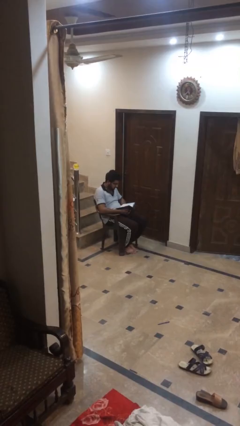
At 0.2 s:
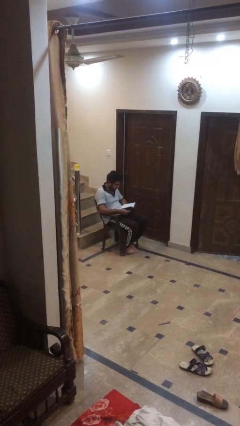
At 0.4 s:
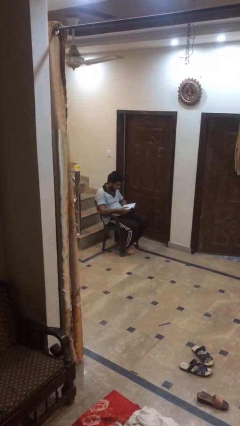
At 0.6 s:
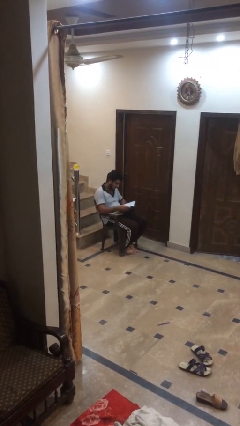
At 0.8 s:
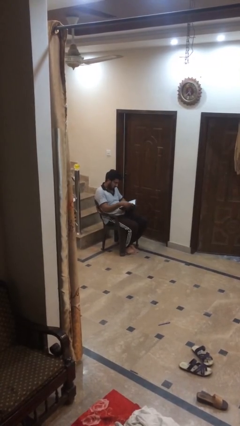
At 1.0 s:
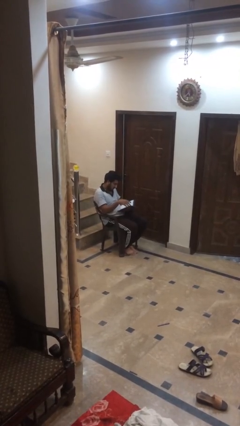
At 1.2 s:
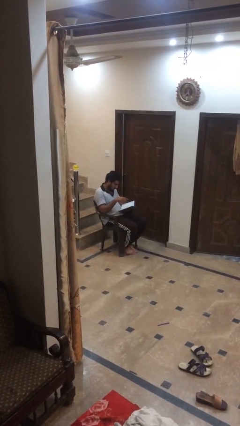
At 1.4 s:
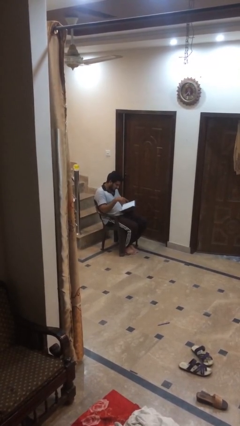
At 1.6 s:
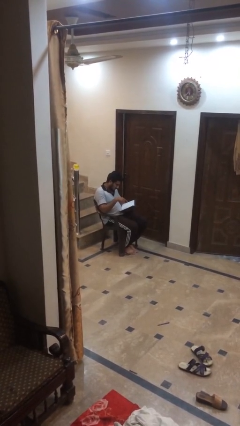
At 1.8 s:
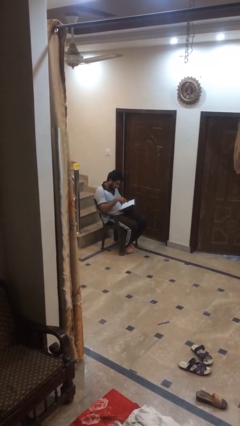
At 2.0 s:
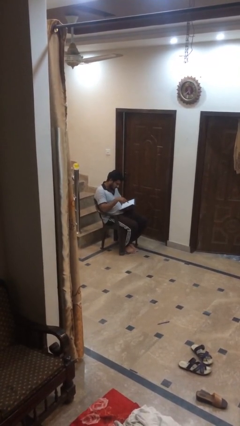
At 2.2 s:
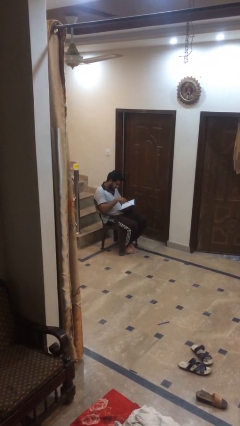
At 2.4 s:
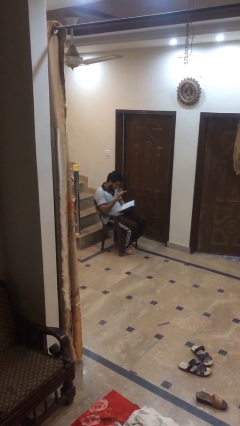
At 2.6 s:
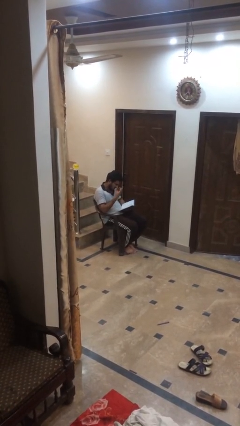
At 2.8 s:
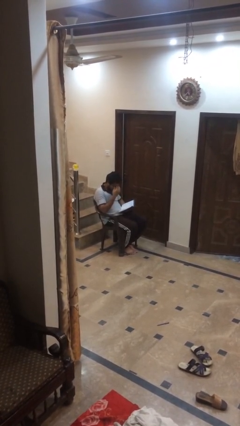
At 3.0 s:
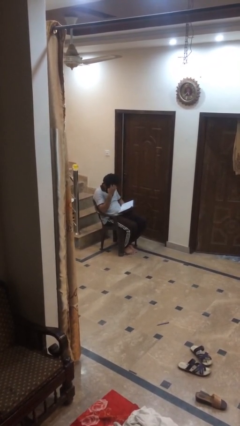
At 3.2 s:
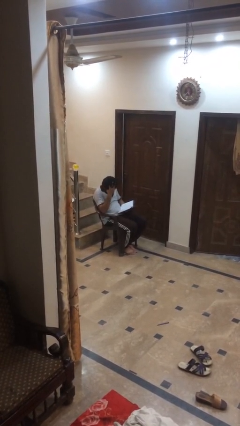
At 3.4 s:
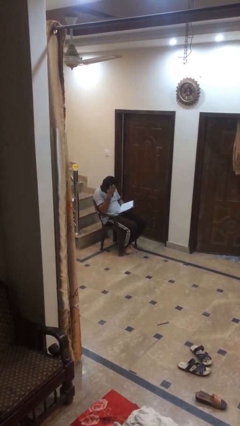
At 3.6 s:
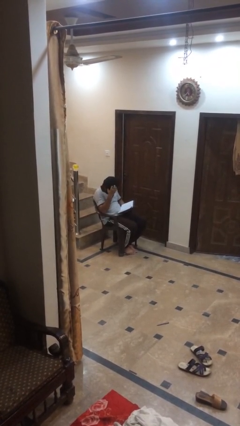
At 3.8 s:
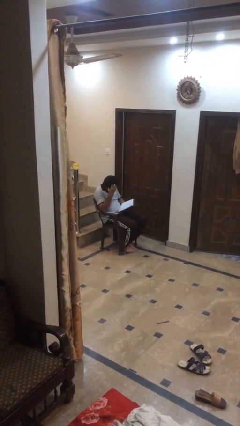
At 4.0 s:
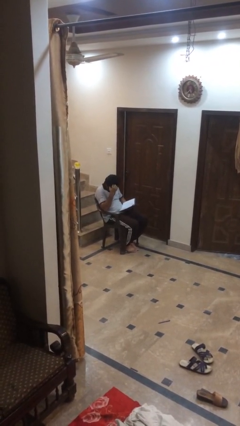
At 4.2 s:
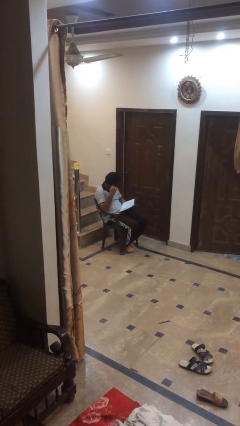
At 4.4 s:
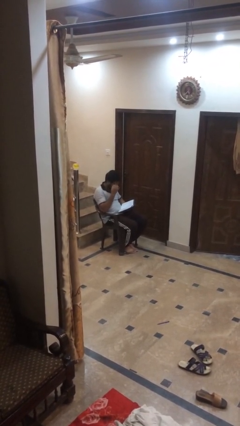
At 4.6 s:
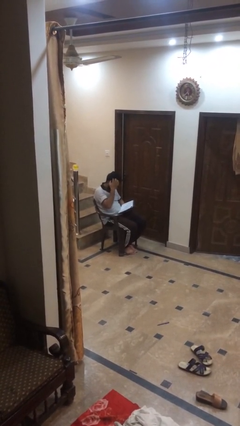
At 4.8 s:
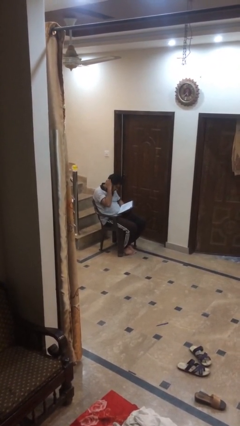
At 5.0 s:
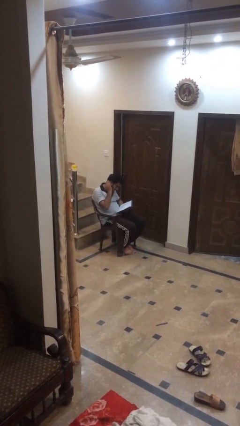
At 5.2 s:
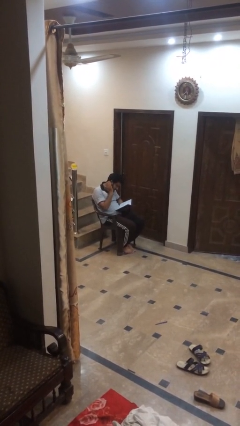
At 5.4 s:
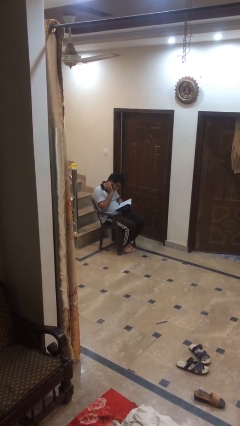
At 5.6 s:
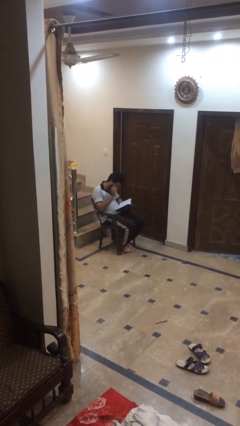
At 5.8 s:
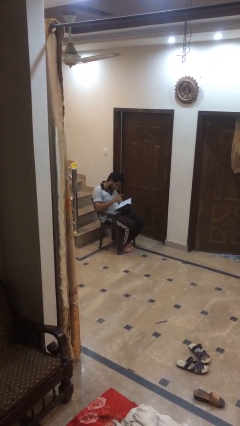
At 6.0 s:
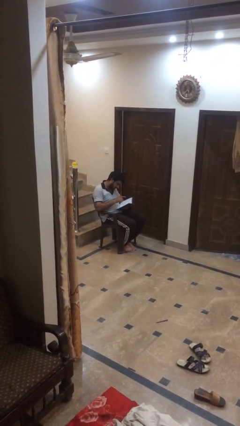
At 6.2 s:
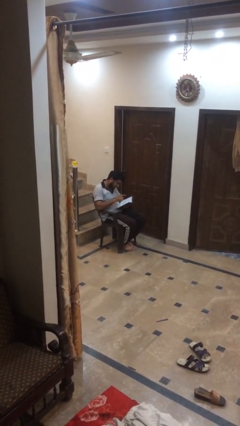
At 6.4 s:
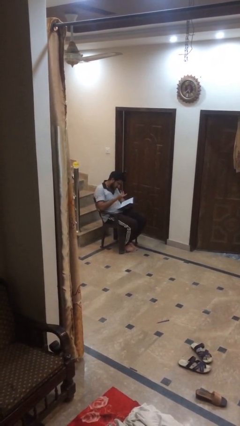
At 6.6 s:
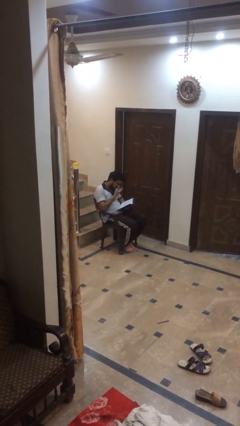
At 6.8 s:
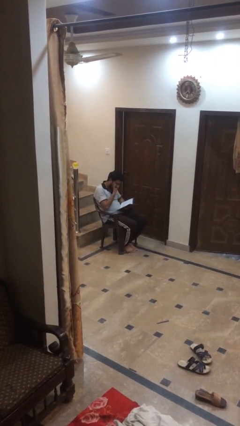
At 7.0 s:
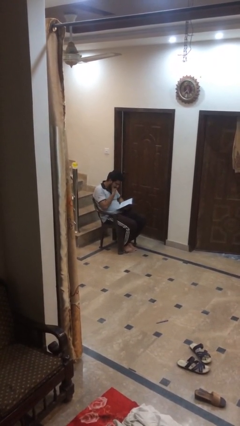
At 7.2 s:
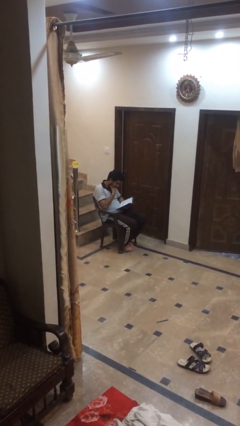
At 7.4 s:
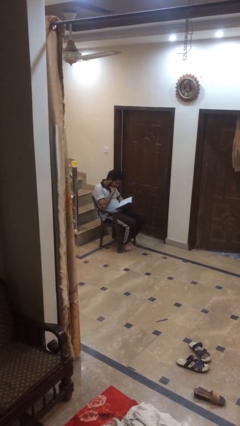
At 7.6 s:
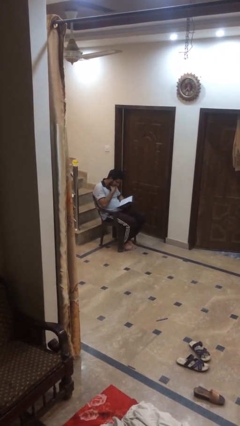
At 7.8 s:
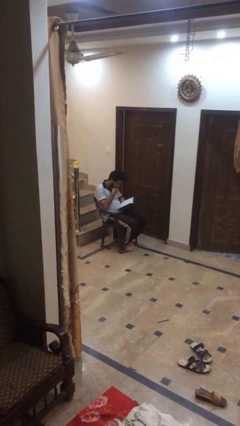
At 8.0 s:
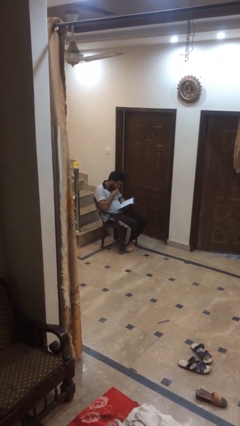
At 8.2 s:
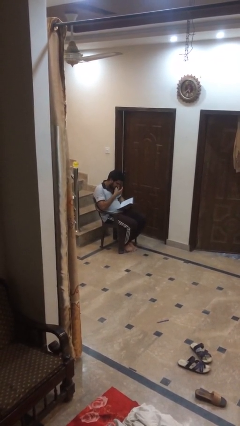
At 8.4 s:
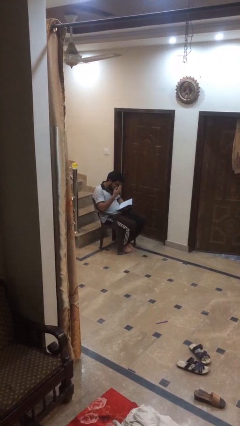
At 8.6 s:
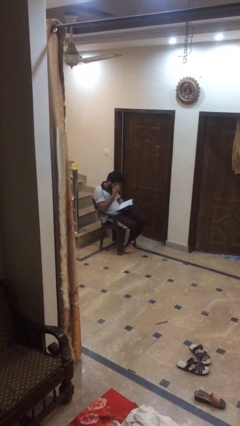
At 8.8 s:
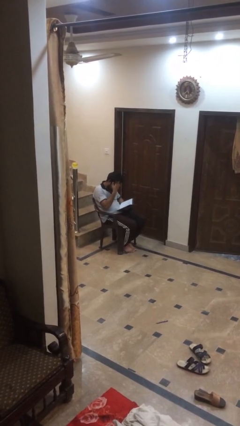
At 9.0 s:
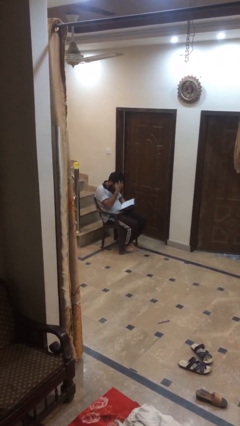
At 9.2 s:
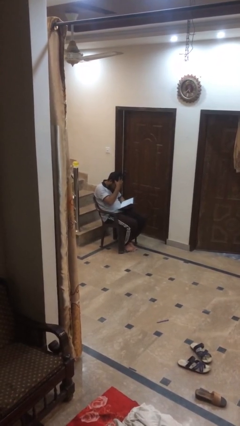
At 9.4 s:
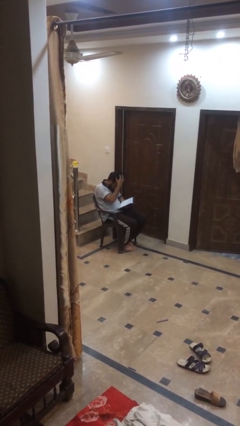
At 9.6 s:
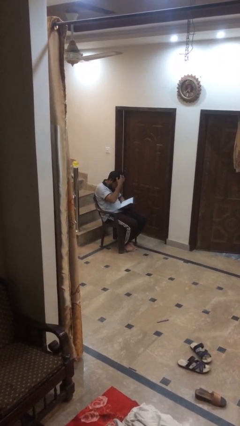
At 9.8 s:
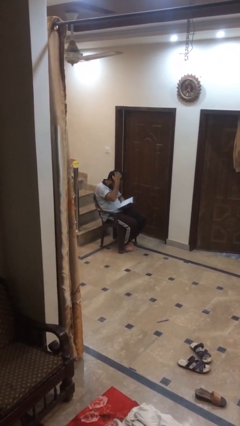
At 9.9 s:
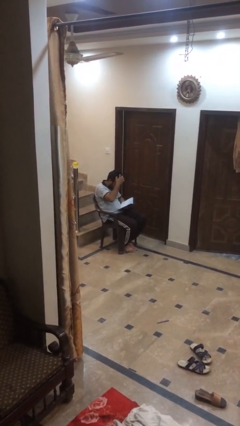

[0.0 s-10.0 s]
person reads document

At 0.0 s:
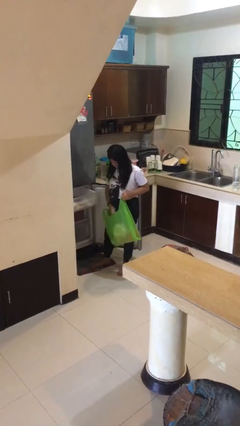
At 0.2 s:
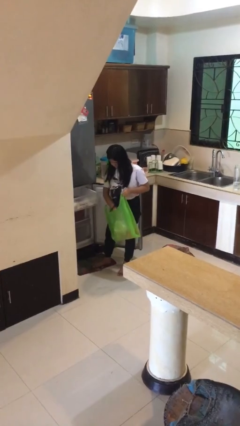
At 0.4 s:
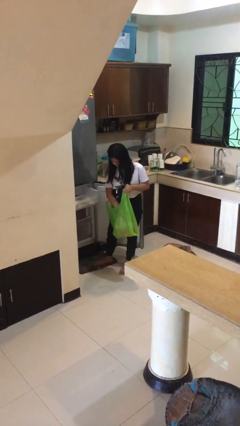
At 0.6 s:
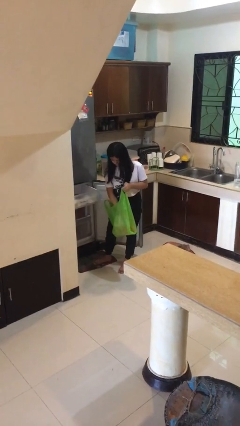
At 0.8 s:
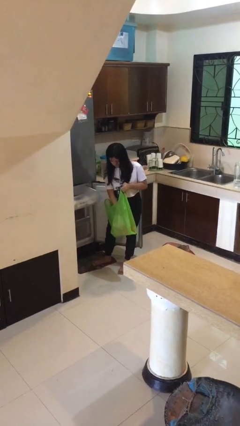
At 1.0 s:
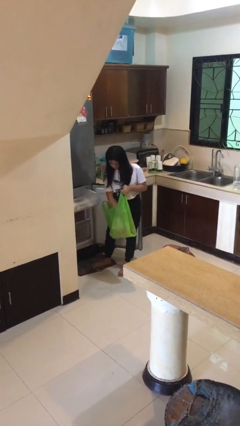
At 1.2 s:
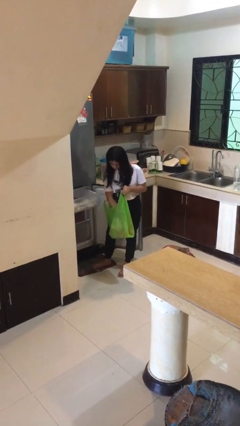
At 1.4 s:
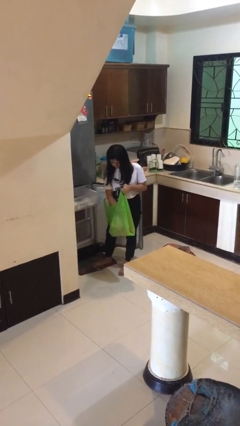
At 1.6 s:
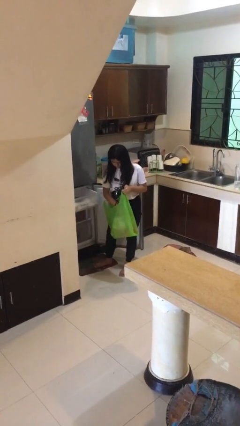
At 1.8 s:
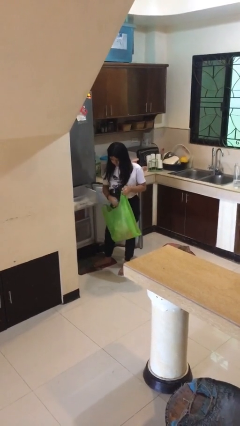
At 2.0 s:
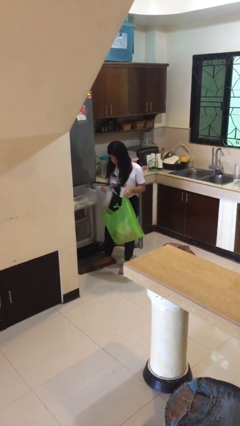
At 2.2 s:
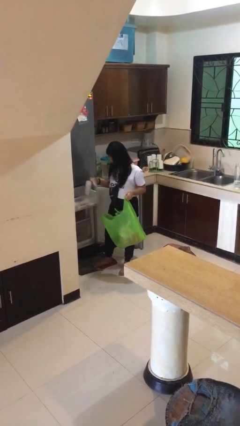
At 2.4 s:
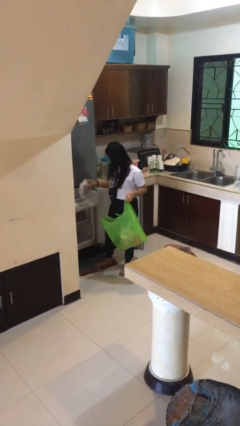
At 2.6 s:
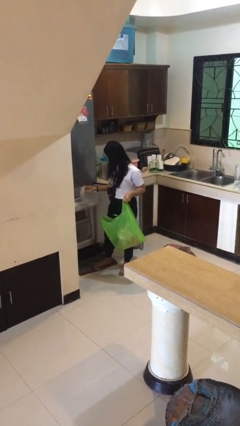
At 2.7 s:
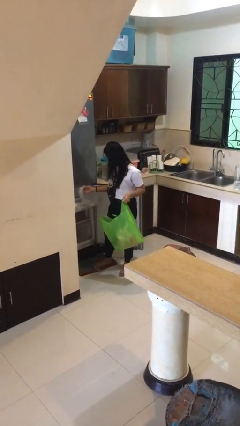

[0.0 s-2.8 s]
person loads groceries into refrigerator

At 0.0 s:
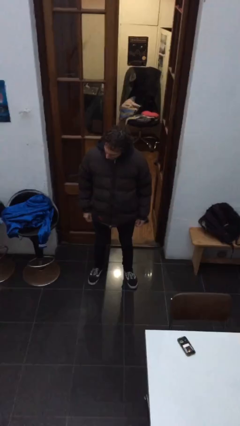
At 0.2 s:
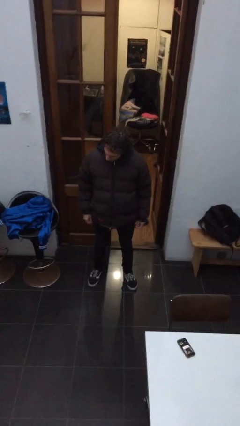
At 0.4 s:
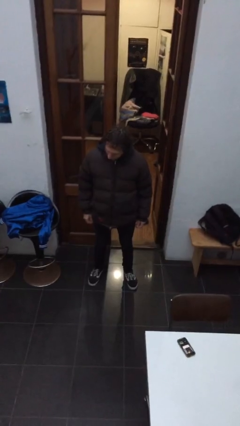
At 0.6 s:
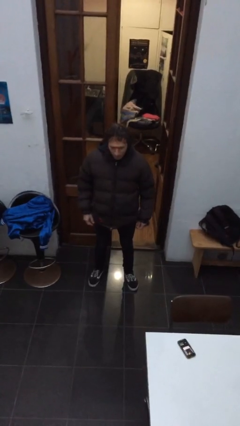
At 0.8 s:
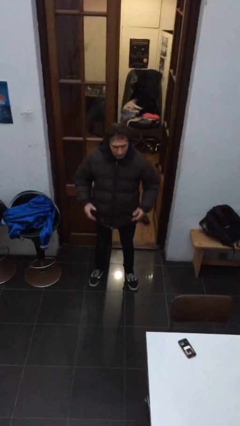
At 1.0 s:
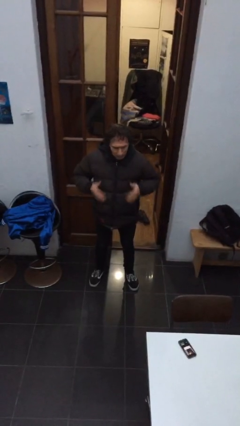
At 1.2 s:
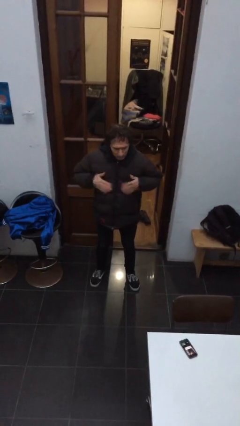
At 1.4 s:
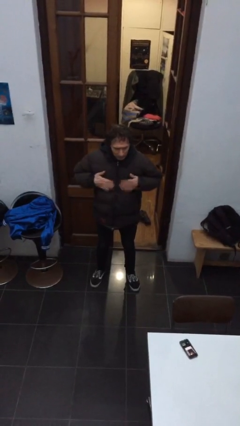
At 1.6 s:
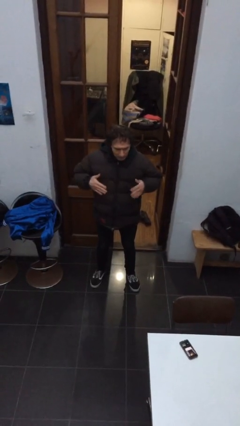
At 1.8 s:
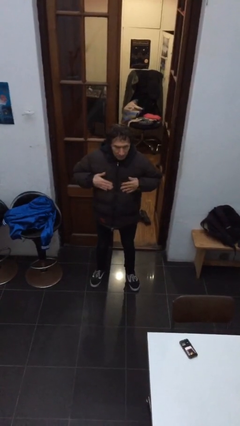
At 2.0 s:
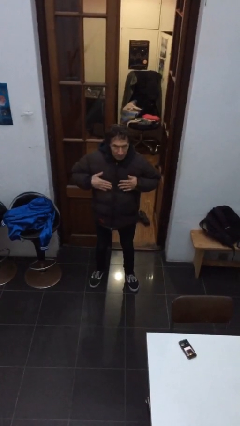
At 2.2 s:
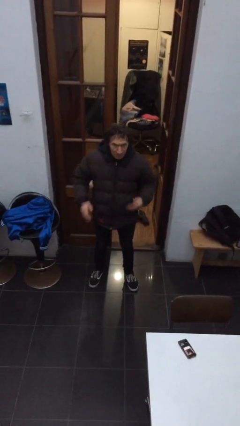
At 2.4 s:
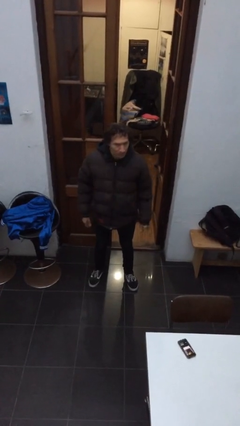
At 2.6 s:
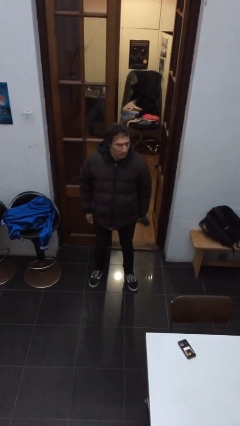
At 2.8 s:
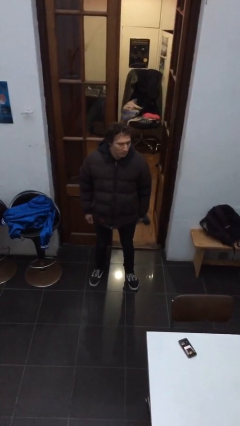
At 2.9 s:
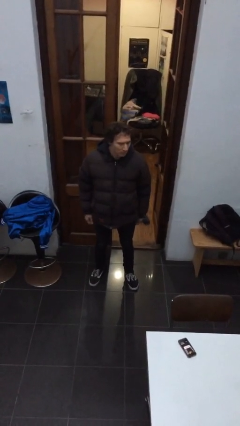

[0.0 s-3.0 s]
person drums on chest

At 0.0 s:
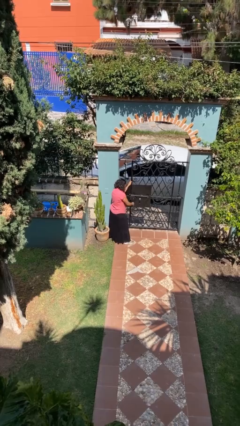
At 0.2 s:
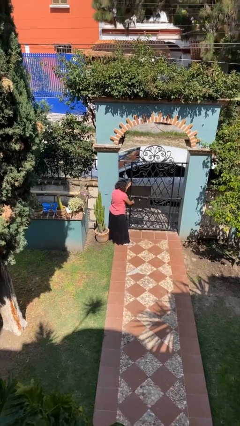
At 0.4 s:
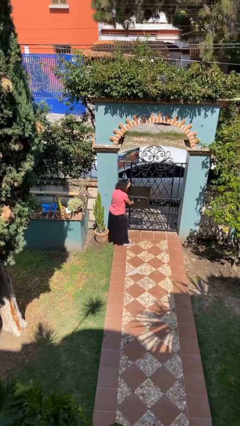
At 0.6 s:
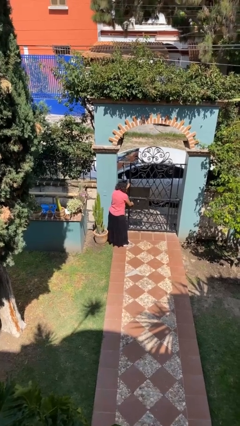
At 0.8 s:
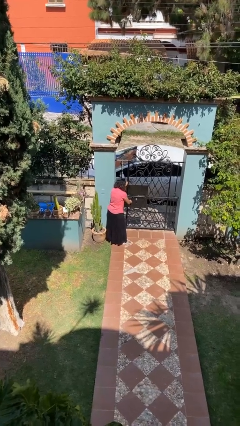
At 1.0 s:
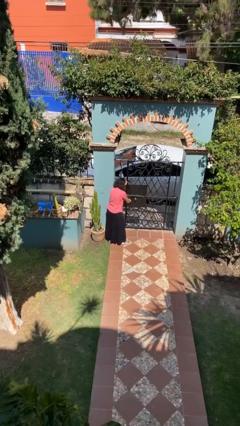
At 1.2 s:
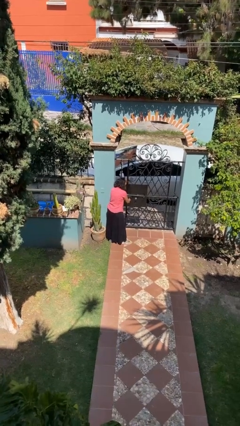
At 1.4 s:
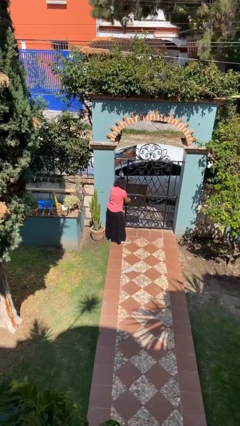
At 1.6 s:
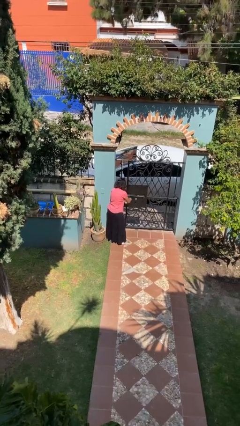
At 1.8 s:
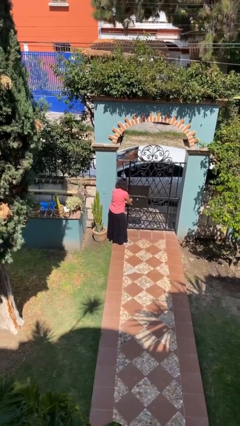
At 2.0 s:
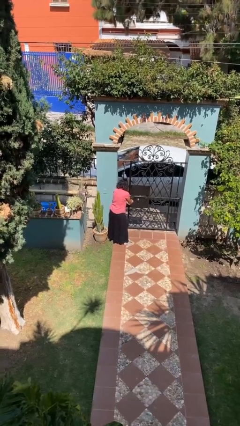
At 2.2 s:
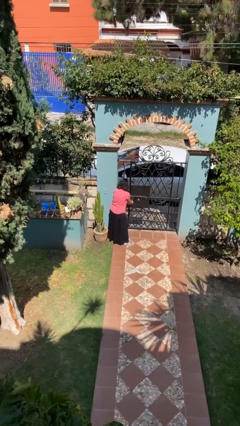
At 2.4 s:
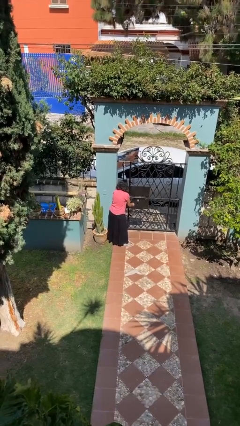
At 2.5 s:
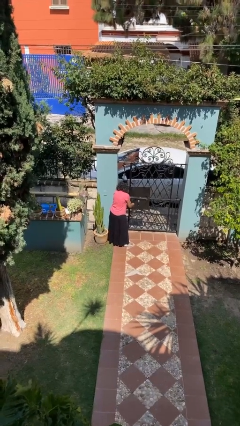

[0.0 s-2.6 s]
person unlocks door with keys
